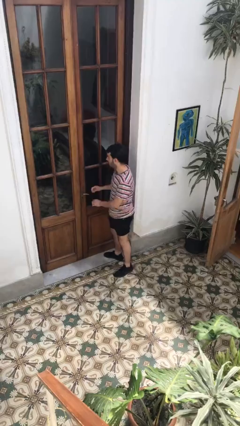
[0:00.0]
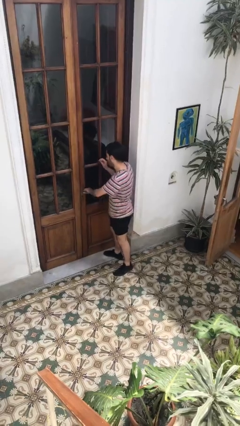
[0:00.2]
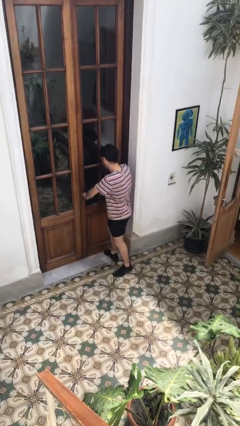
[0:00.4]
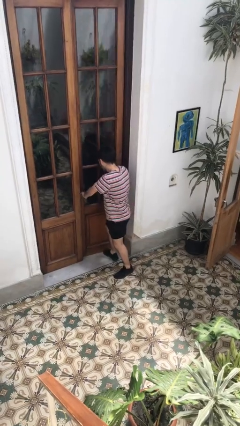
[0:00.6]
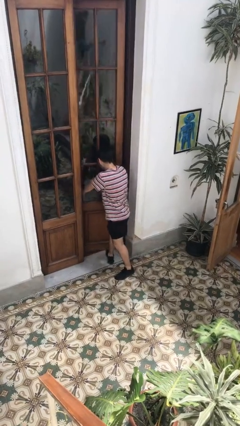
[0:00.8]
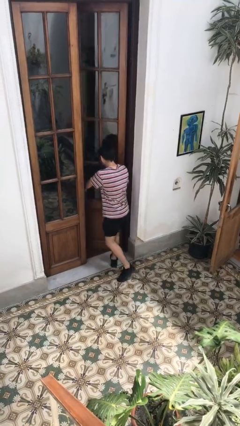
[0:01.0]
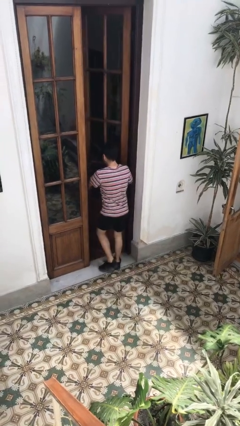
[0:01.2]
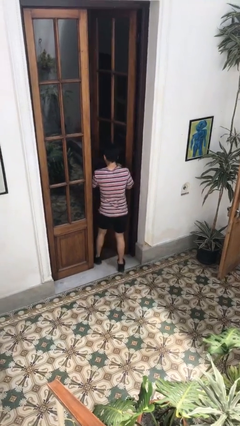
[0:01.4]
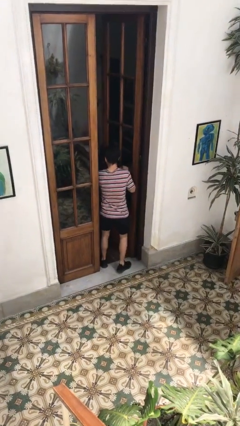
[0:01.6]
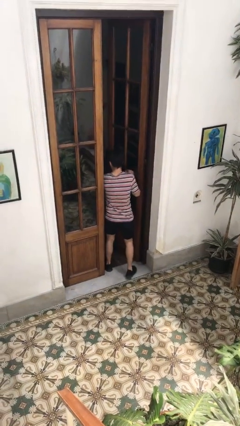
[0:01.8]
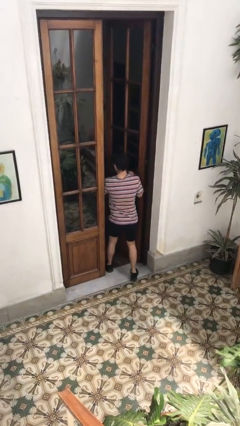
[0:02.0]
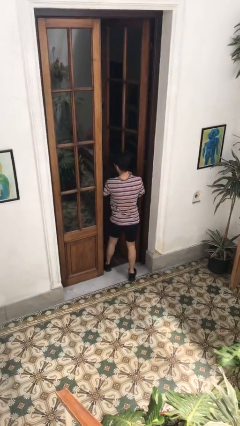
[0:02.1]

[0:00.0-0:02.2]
person opens facility door

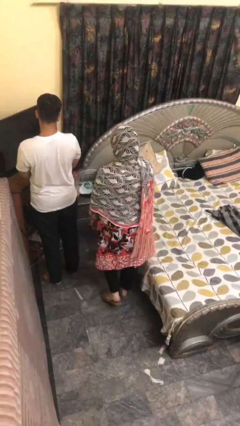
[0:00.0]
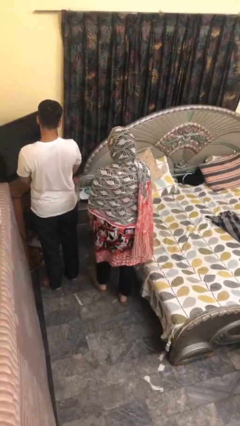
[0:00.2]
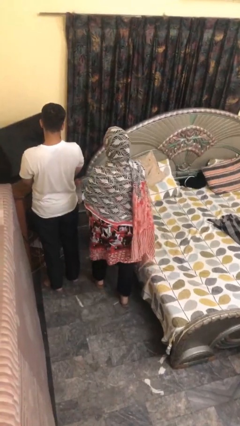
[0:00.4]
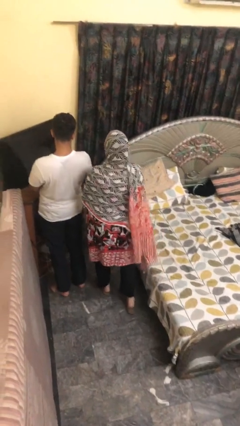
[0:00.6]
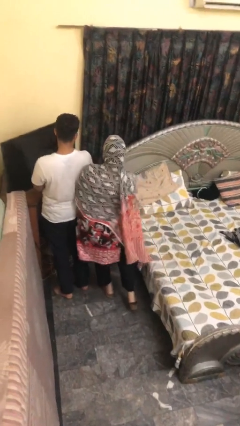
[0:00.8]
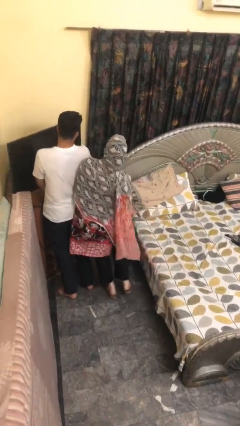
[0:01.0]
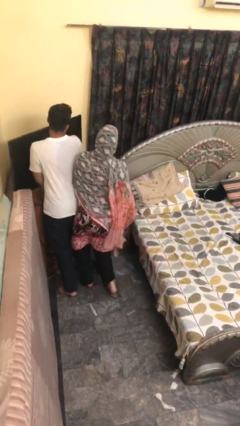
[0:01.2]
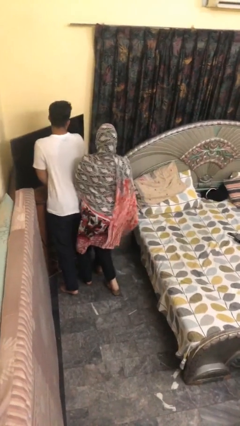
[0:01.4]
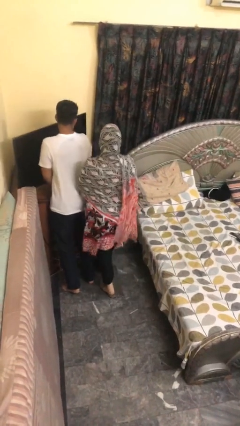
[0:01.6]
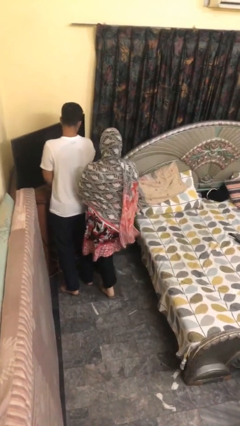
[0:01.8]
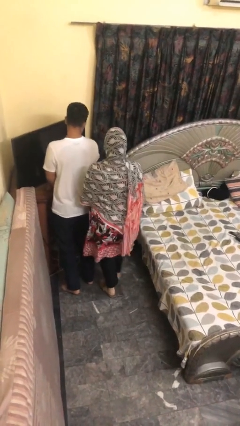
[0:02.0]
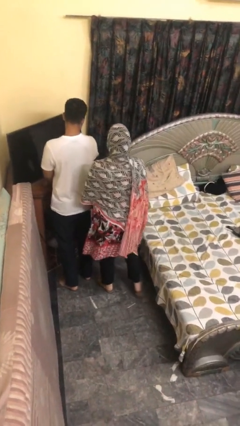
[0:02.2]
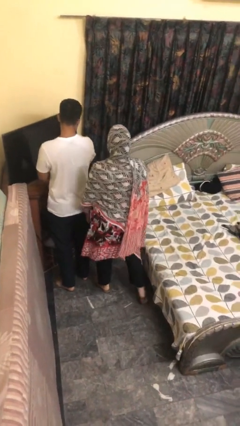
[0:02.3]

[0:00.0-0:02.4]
person bumps into person

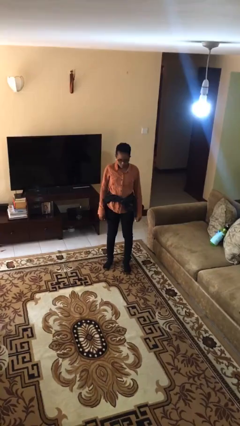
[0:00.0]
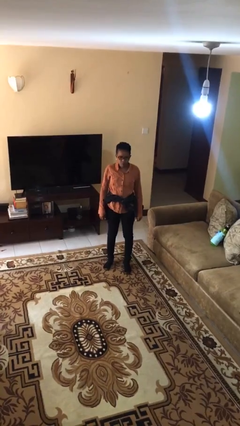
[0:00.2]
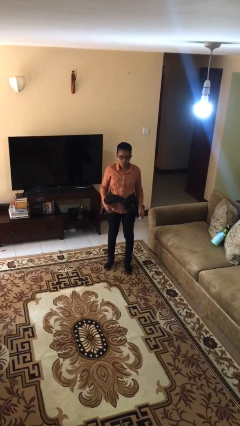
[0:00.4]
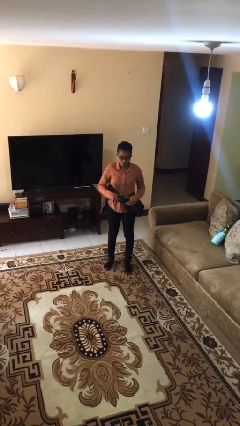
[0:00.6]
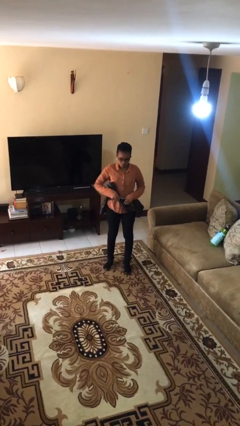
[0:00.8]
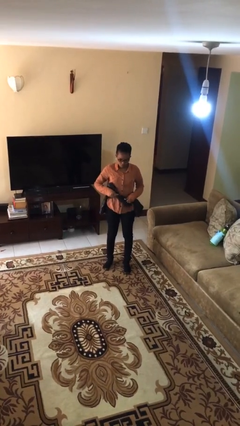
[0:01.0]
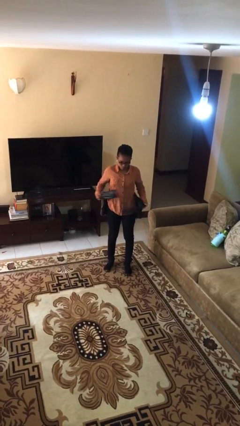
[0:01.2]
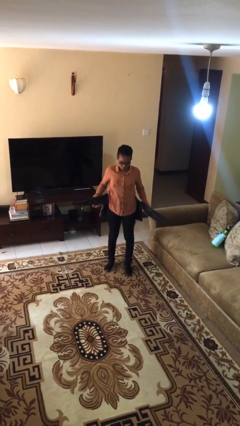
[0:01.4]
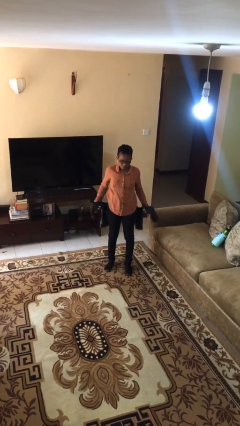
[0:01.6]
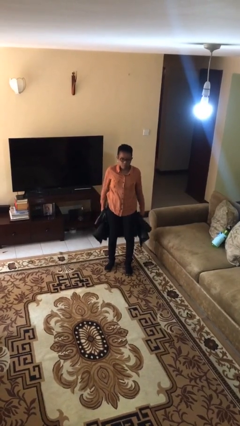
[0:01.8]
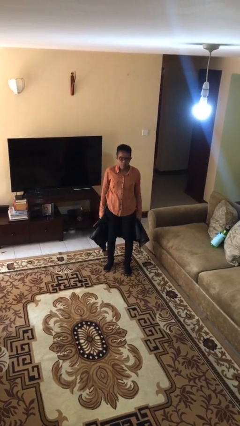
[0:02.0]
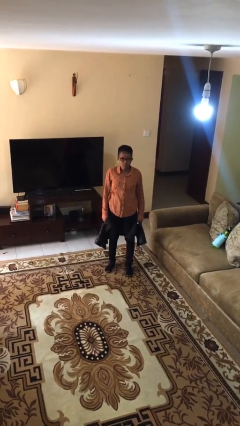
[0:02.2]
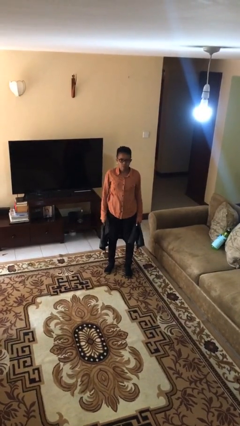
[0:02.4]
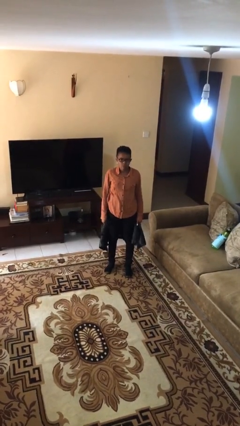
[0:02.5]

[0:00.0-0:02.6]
person unties jacket around waist

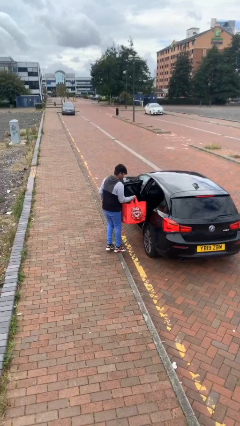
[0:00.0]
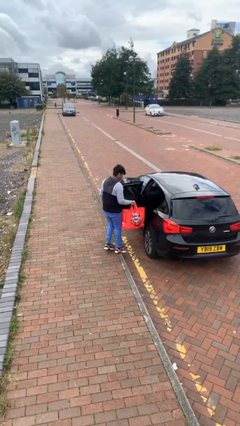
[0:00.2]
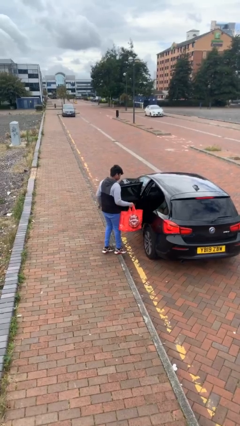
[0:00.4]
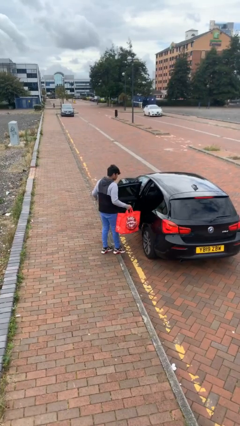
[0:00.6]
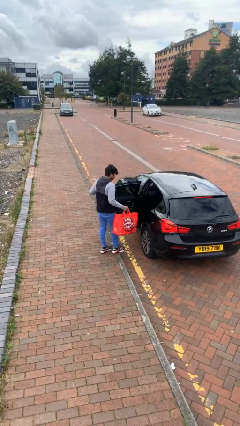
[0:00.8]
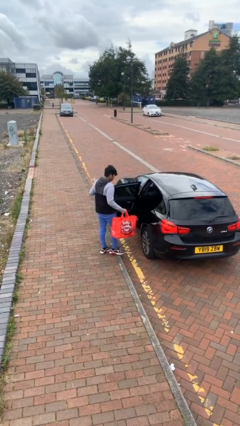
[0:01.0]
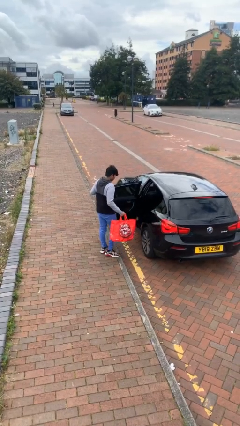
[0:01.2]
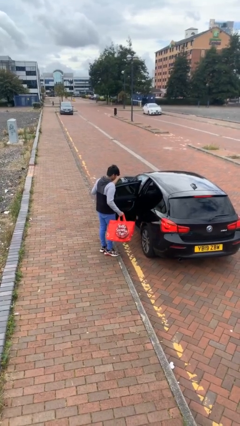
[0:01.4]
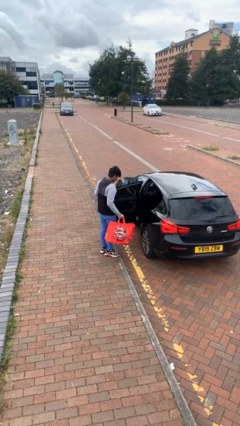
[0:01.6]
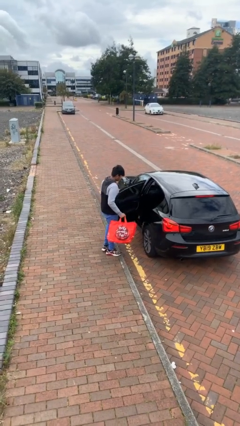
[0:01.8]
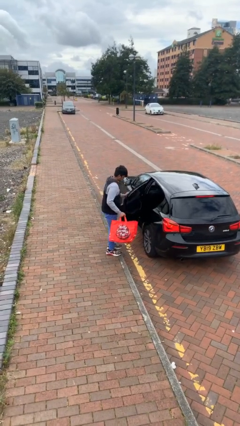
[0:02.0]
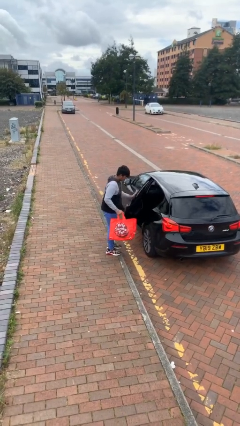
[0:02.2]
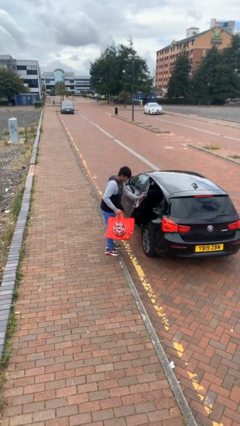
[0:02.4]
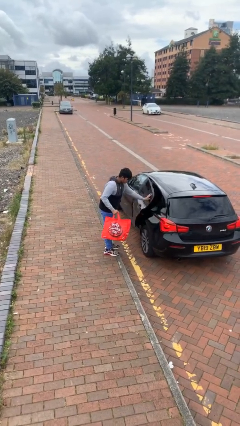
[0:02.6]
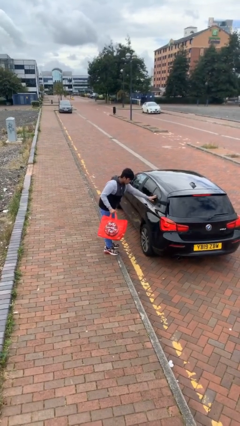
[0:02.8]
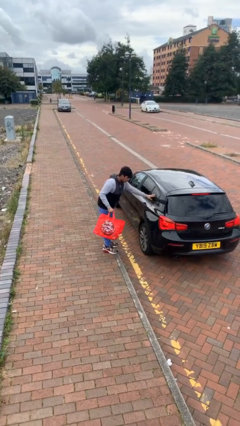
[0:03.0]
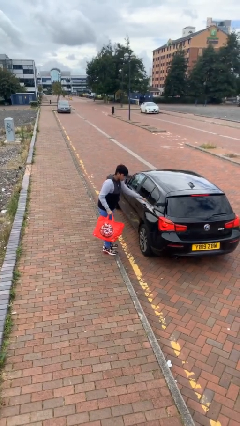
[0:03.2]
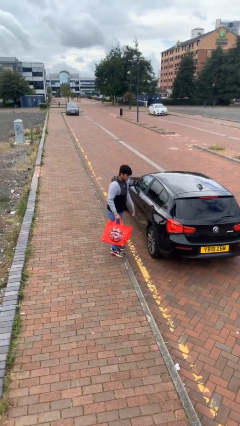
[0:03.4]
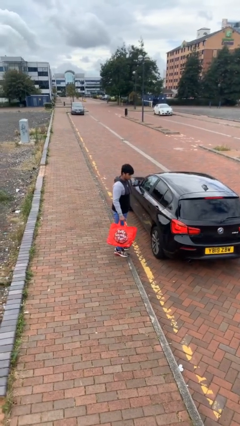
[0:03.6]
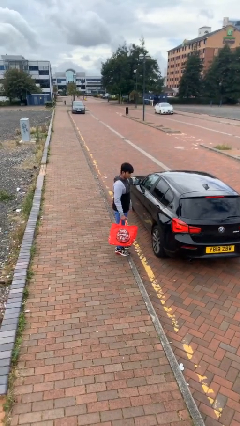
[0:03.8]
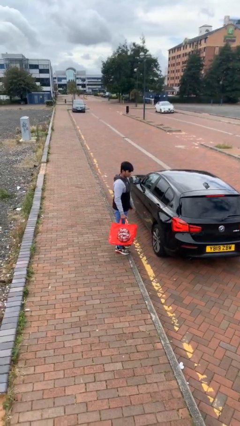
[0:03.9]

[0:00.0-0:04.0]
person closes car door

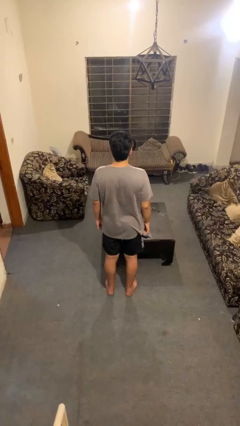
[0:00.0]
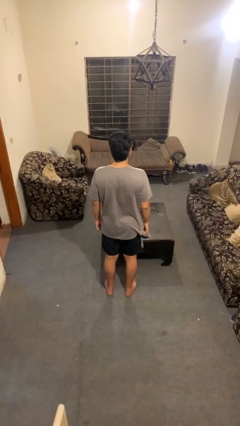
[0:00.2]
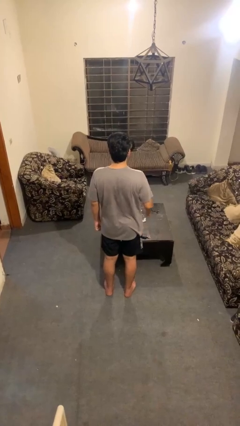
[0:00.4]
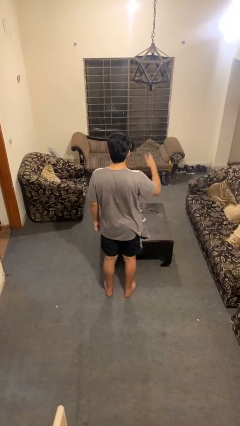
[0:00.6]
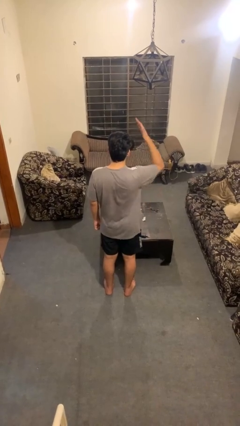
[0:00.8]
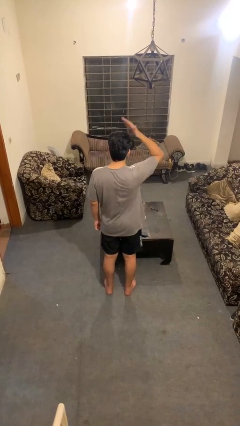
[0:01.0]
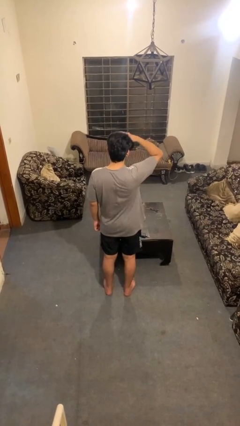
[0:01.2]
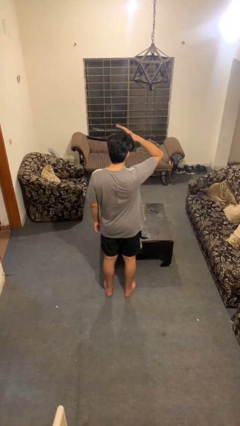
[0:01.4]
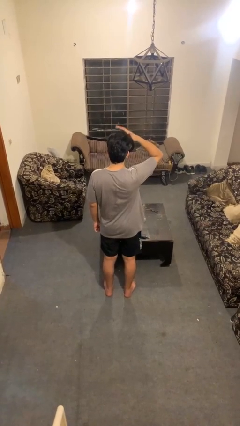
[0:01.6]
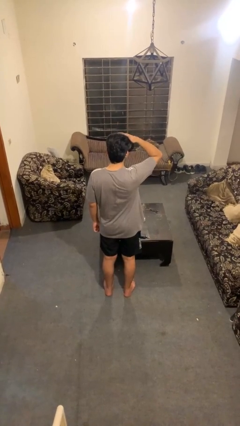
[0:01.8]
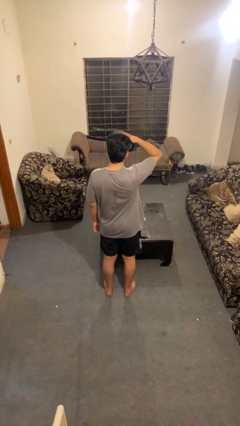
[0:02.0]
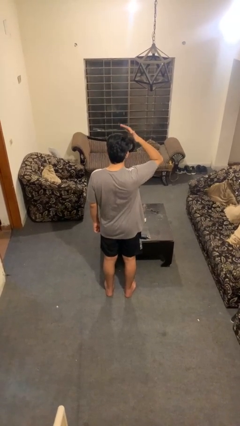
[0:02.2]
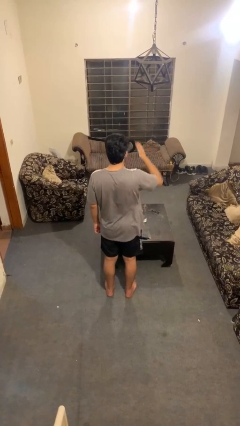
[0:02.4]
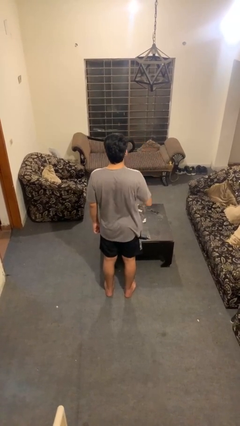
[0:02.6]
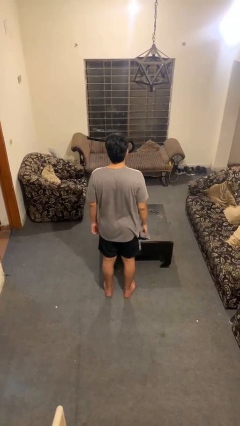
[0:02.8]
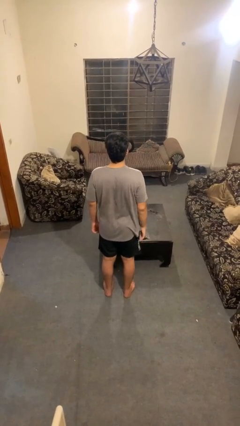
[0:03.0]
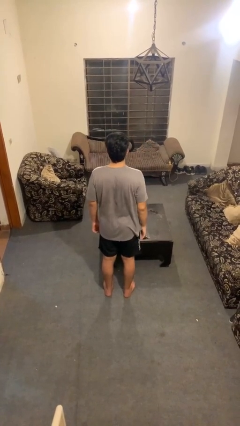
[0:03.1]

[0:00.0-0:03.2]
person pats head

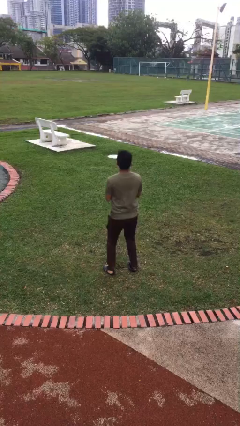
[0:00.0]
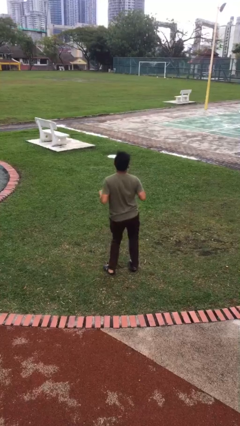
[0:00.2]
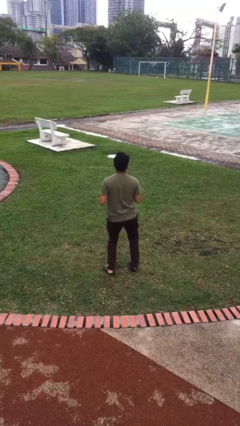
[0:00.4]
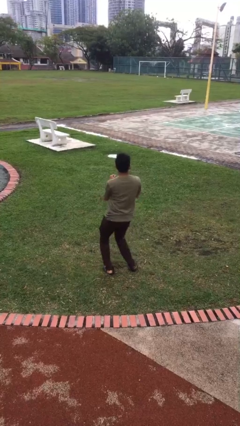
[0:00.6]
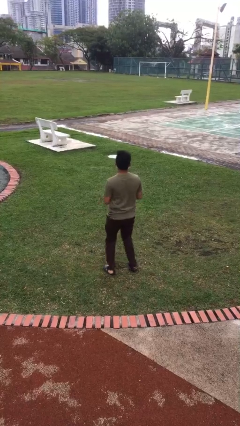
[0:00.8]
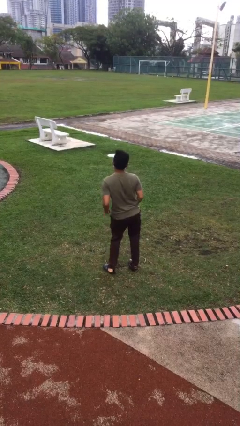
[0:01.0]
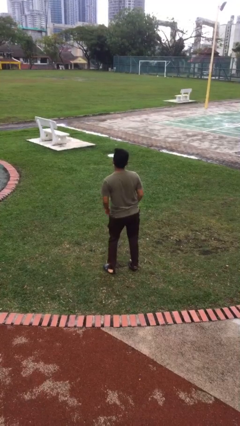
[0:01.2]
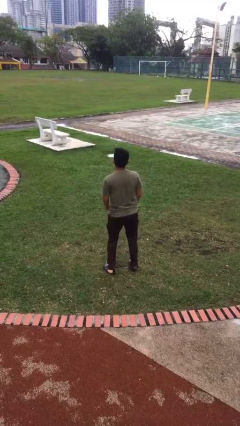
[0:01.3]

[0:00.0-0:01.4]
person dances in place

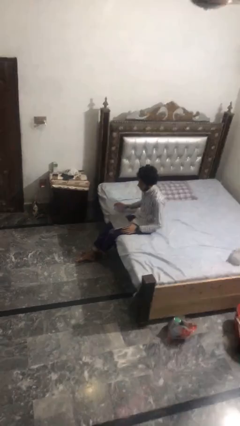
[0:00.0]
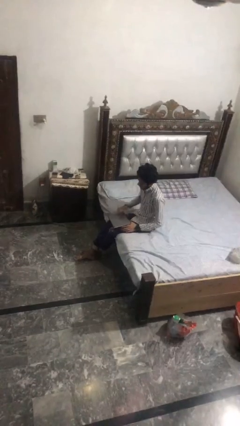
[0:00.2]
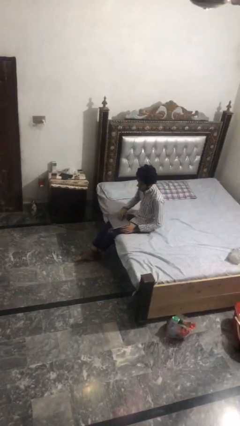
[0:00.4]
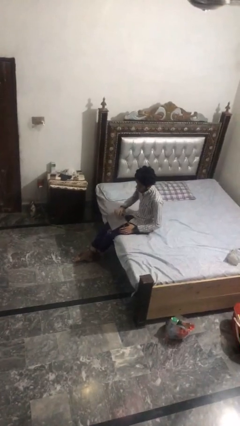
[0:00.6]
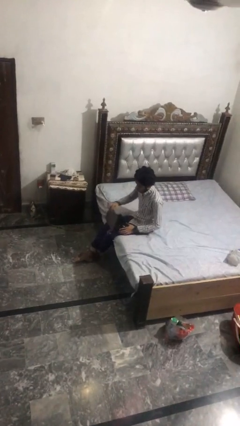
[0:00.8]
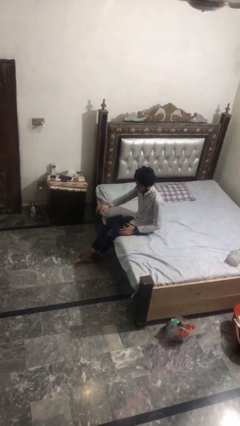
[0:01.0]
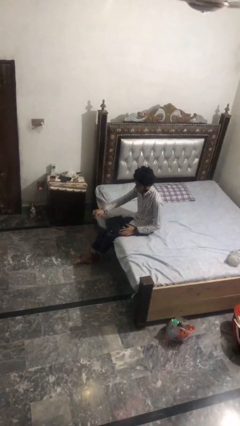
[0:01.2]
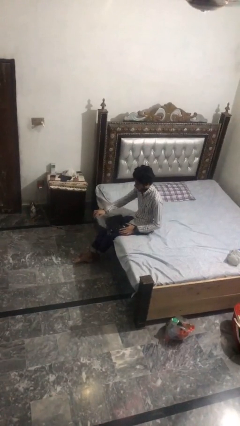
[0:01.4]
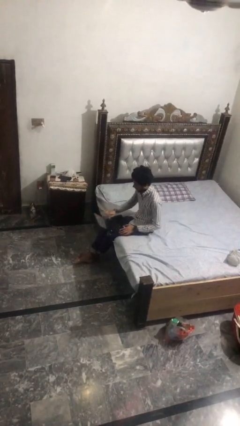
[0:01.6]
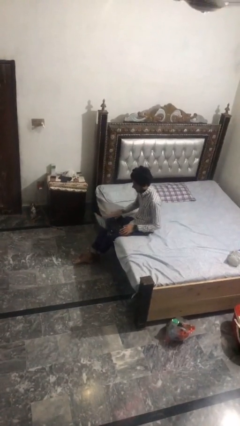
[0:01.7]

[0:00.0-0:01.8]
person opens laptop
